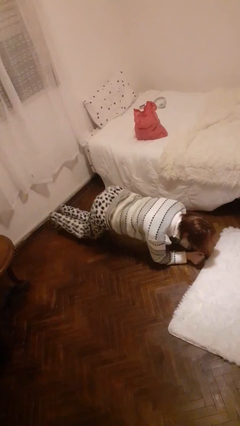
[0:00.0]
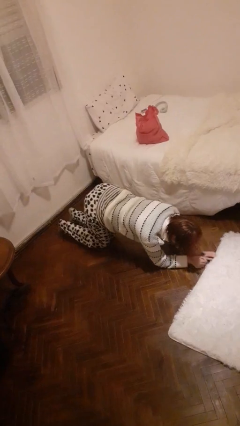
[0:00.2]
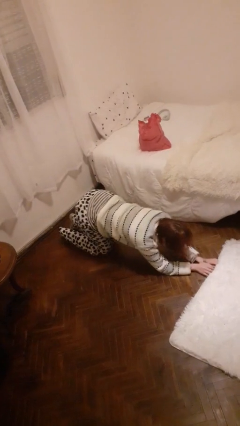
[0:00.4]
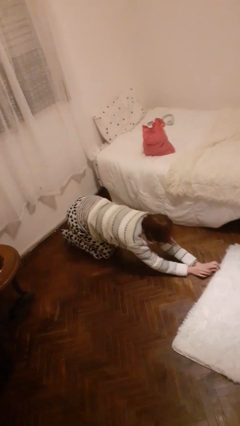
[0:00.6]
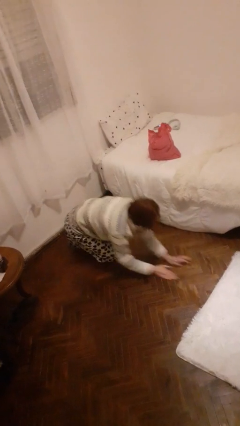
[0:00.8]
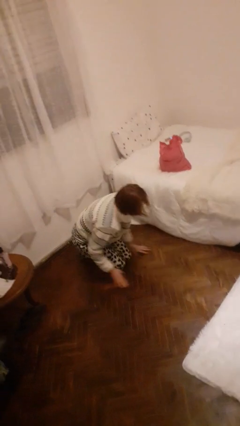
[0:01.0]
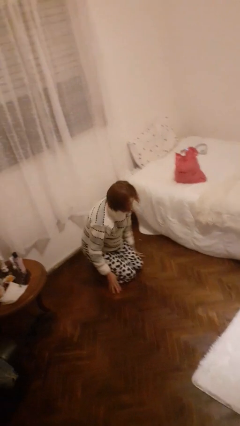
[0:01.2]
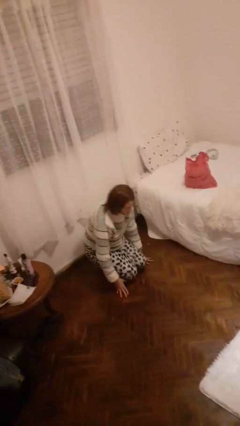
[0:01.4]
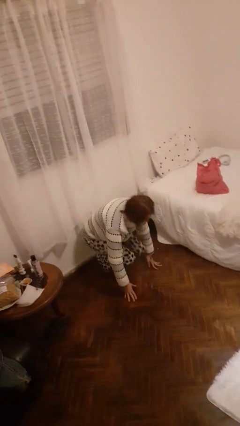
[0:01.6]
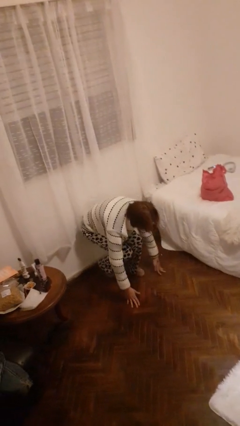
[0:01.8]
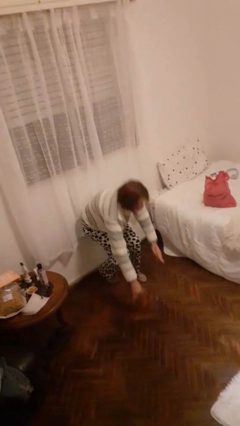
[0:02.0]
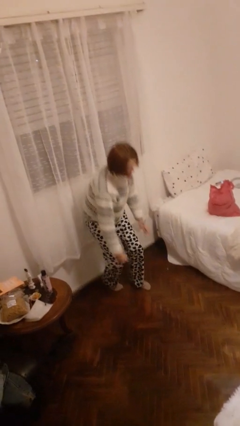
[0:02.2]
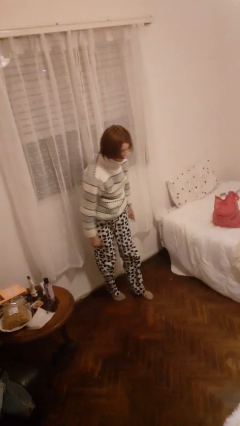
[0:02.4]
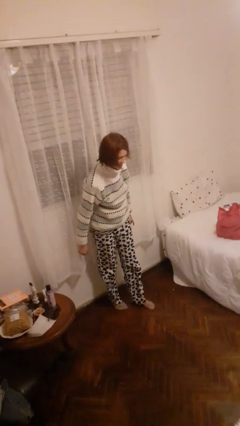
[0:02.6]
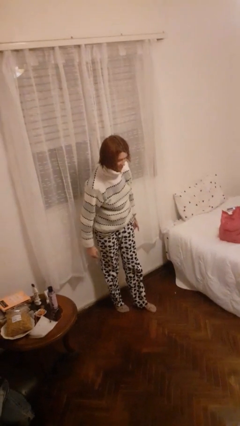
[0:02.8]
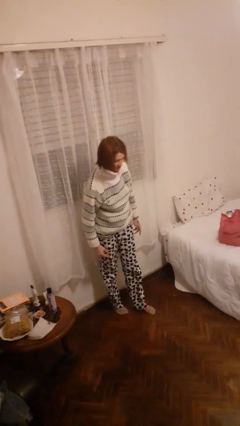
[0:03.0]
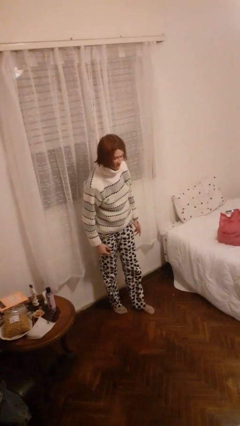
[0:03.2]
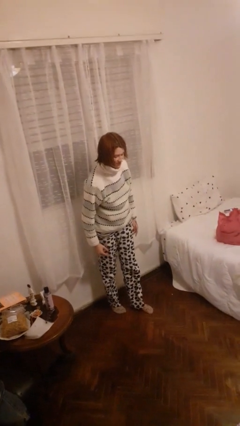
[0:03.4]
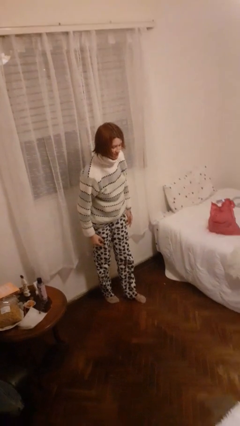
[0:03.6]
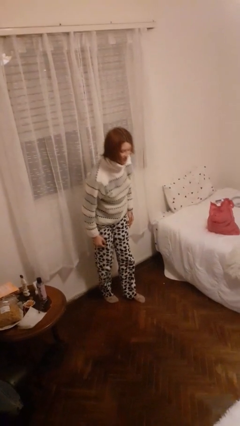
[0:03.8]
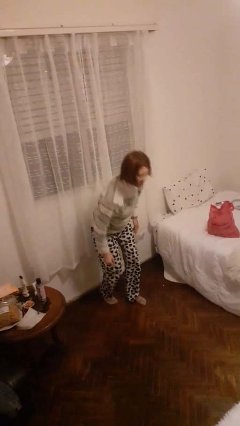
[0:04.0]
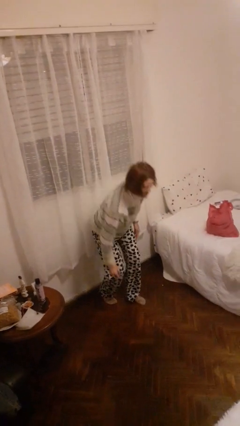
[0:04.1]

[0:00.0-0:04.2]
person stands up from floor

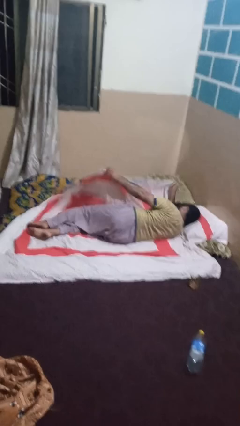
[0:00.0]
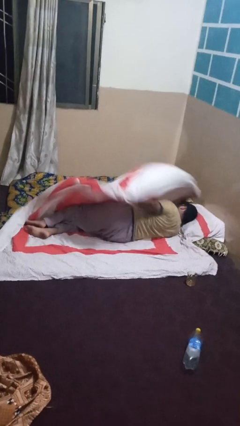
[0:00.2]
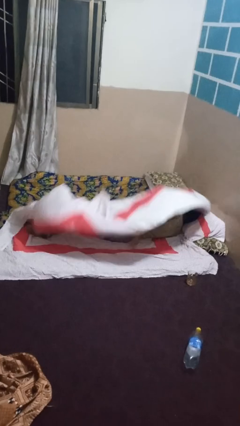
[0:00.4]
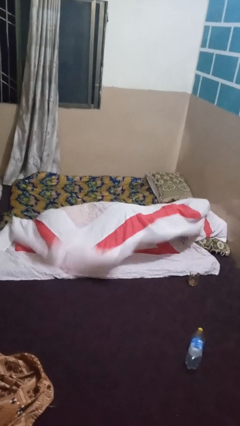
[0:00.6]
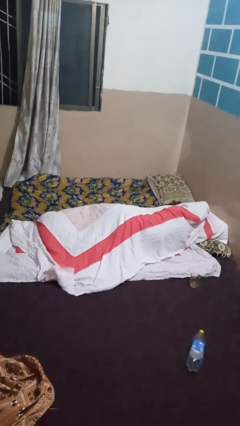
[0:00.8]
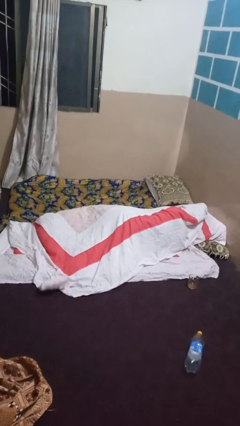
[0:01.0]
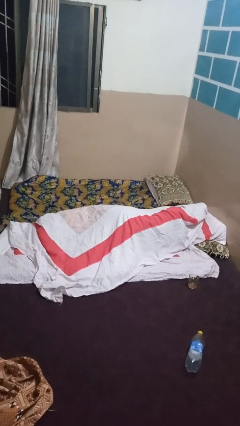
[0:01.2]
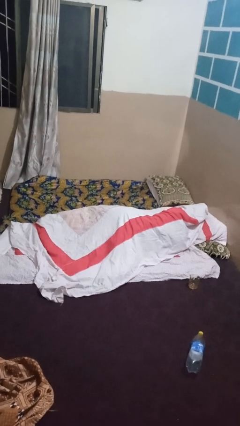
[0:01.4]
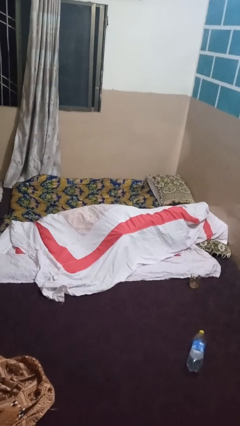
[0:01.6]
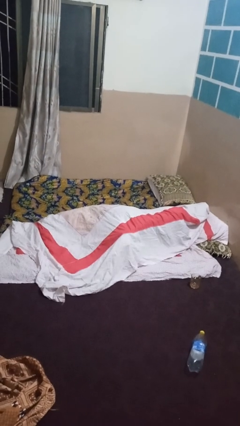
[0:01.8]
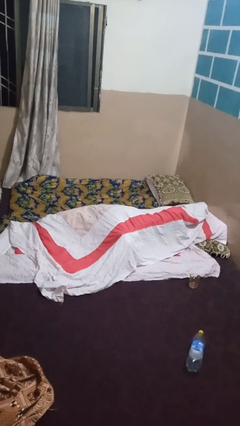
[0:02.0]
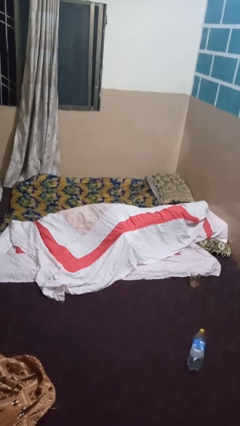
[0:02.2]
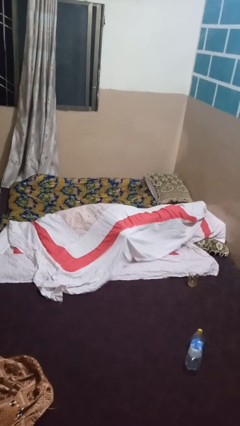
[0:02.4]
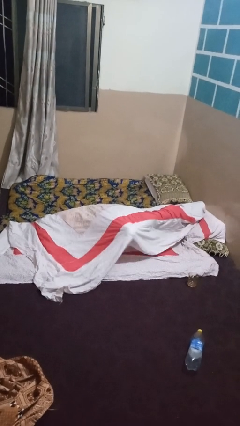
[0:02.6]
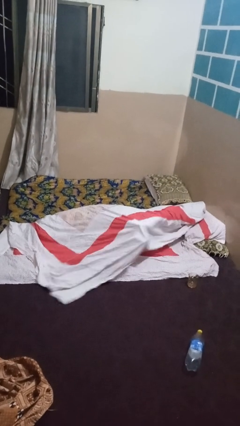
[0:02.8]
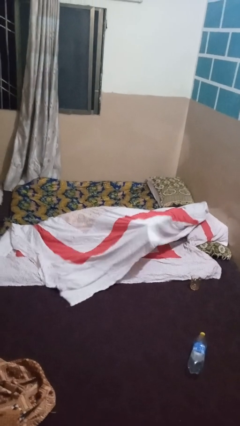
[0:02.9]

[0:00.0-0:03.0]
person covers with bedsheets

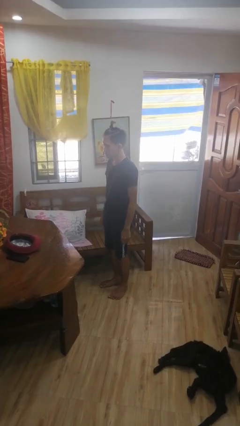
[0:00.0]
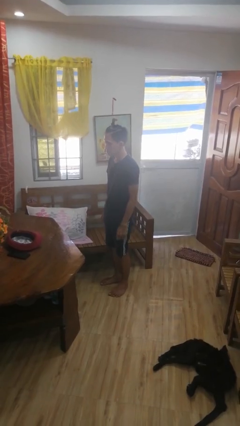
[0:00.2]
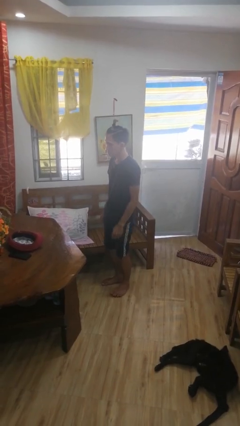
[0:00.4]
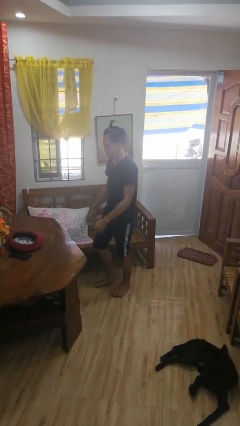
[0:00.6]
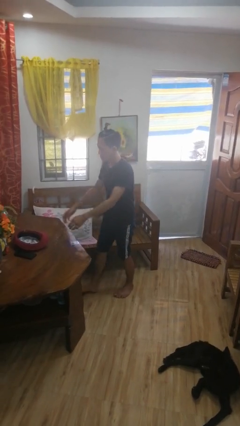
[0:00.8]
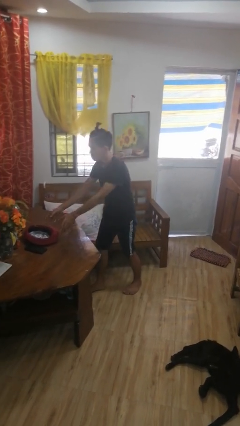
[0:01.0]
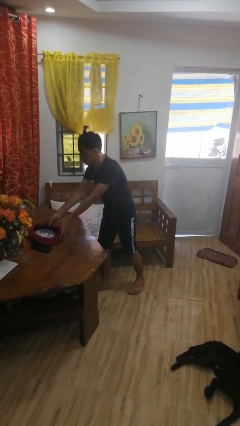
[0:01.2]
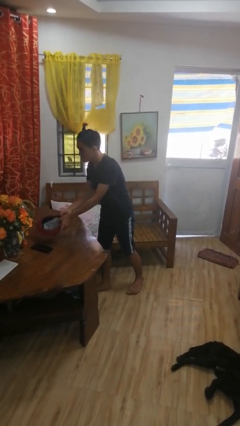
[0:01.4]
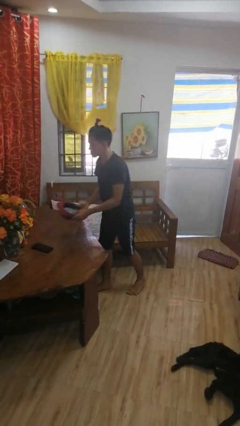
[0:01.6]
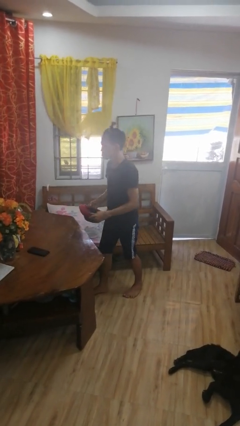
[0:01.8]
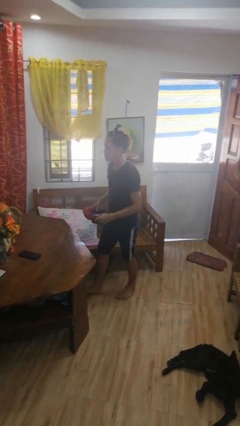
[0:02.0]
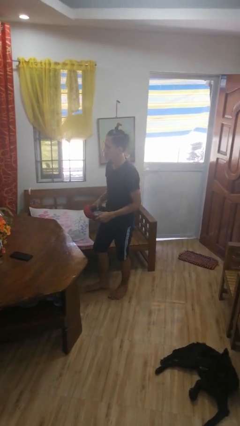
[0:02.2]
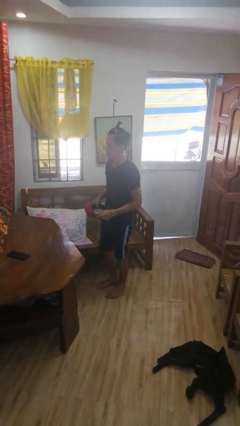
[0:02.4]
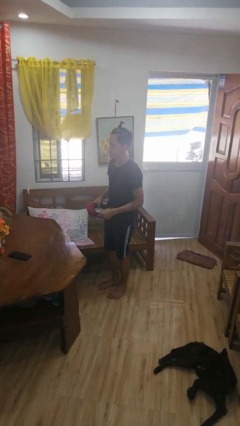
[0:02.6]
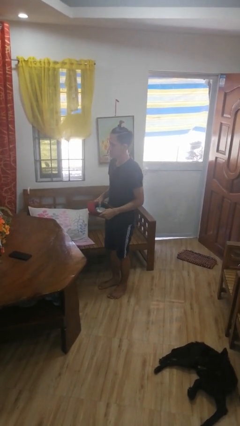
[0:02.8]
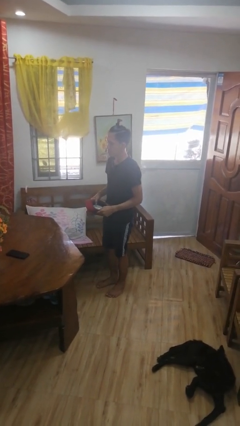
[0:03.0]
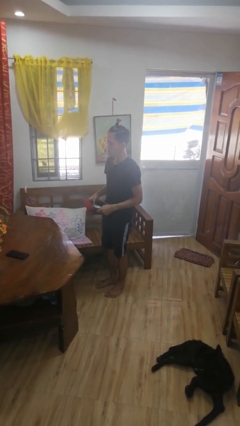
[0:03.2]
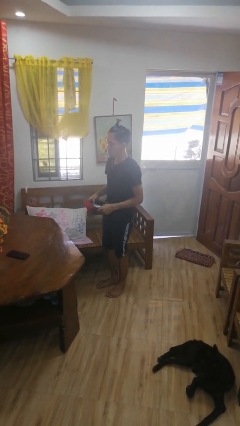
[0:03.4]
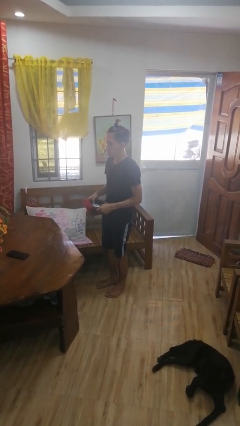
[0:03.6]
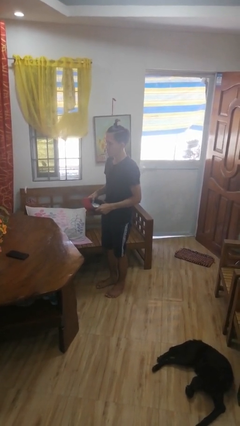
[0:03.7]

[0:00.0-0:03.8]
person picks up object from table

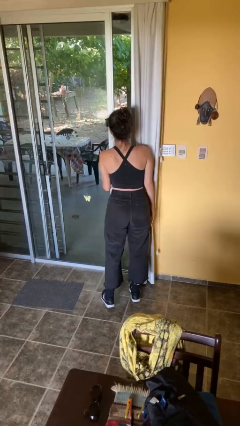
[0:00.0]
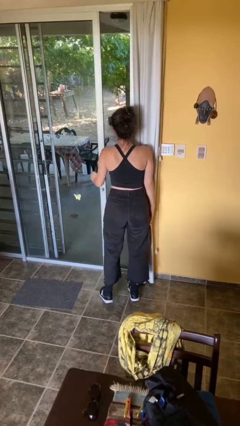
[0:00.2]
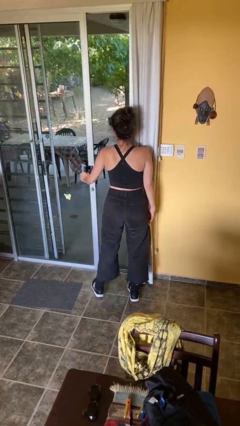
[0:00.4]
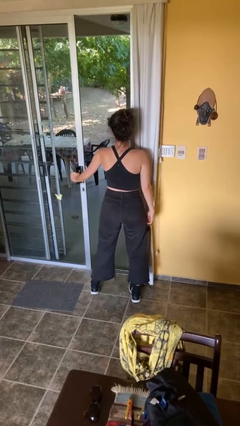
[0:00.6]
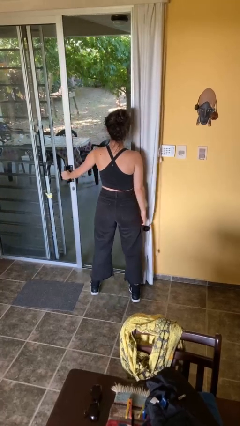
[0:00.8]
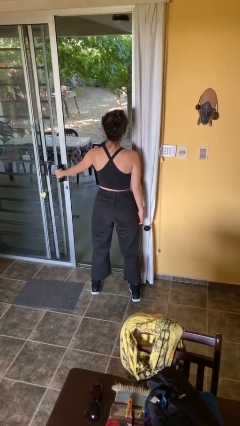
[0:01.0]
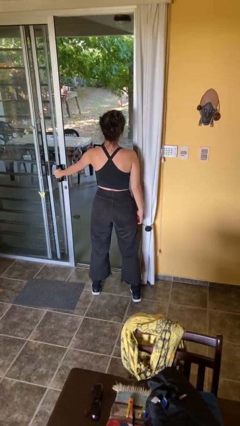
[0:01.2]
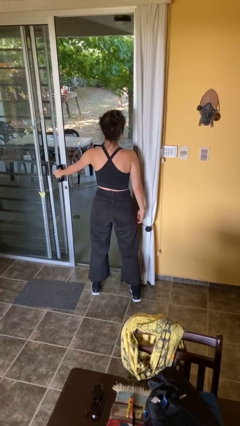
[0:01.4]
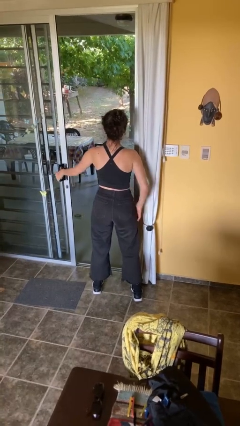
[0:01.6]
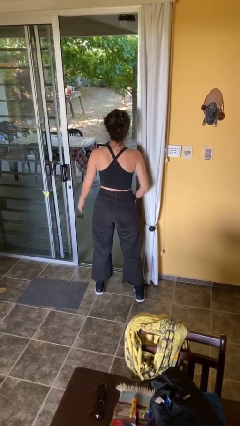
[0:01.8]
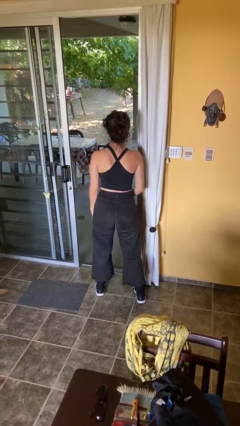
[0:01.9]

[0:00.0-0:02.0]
person opens facility door

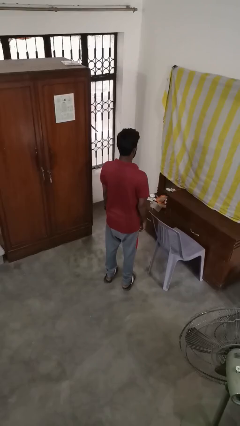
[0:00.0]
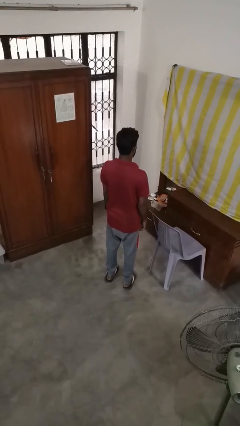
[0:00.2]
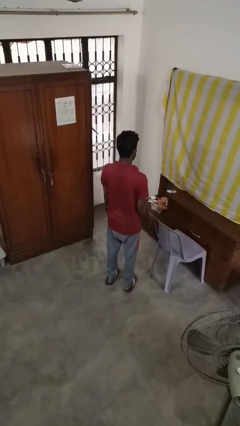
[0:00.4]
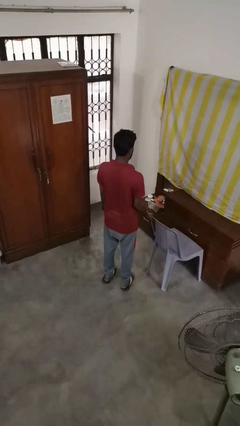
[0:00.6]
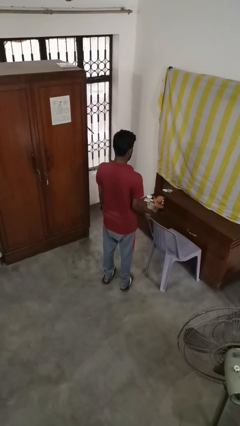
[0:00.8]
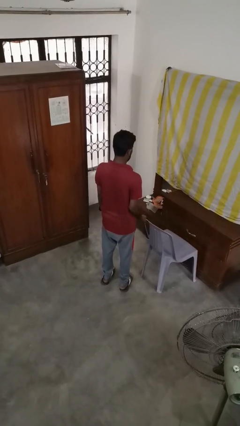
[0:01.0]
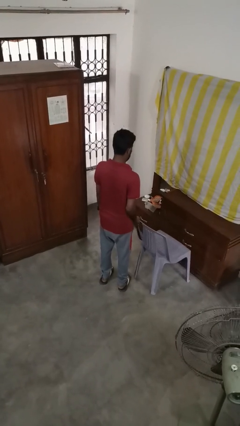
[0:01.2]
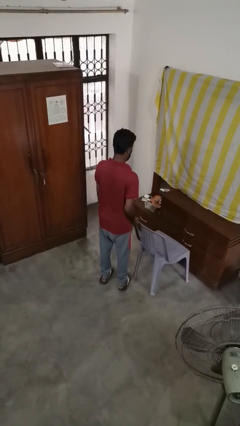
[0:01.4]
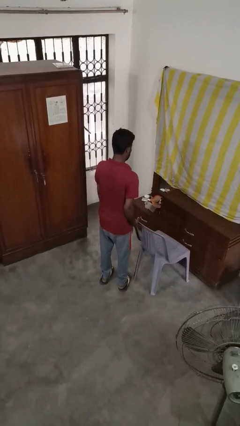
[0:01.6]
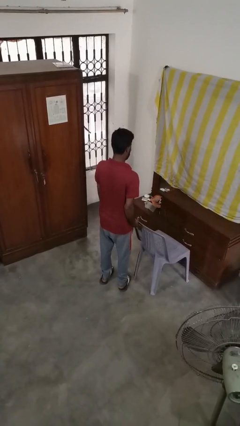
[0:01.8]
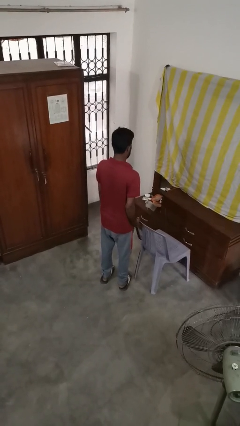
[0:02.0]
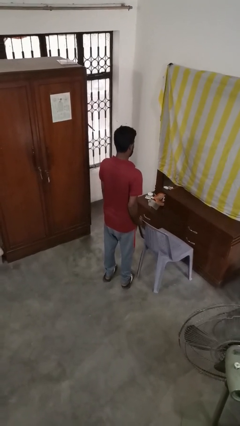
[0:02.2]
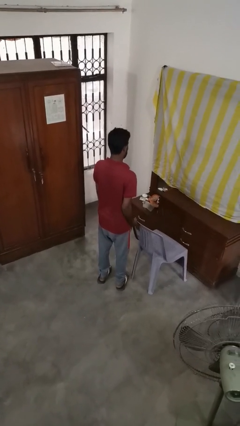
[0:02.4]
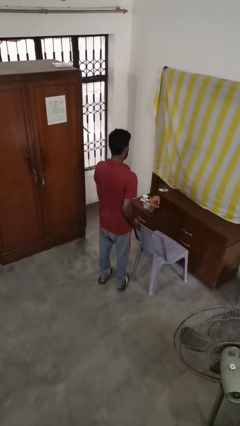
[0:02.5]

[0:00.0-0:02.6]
person pulls out chair

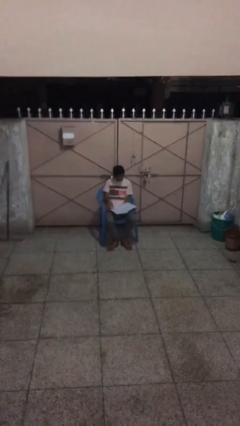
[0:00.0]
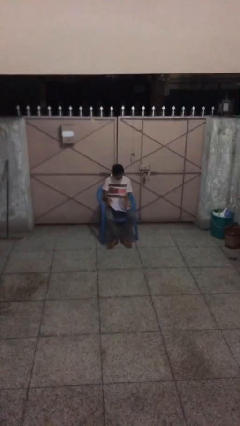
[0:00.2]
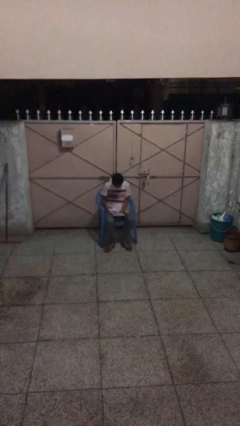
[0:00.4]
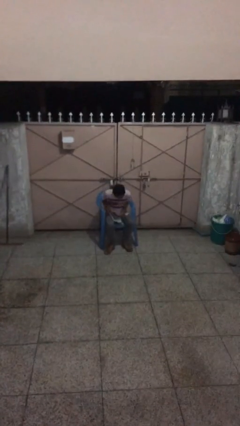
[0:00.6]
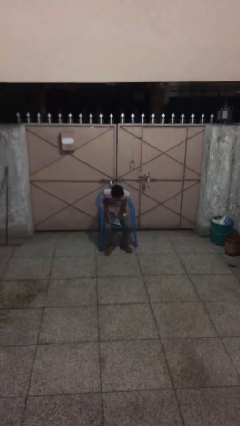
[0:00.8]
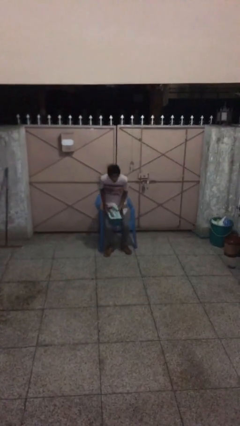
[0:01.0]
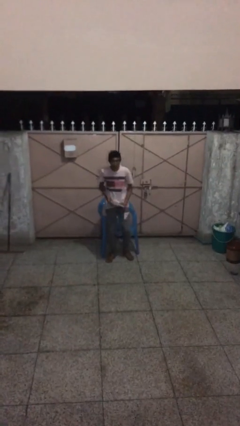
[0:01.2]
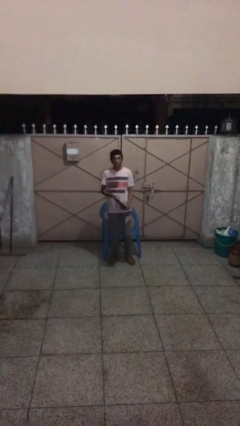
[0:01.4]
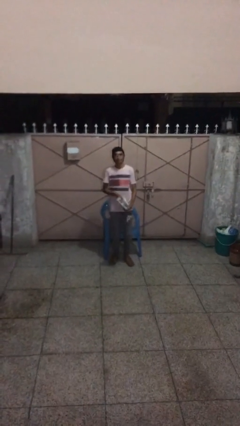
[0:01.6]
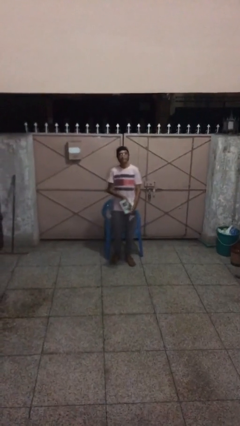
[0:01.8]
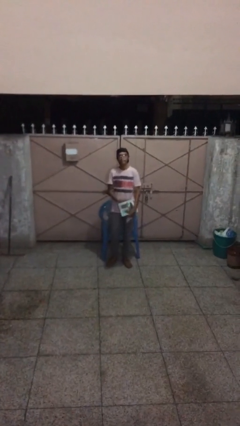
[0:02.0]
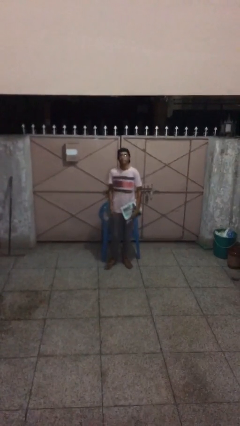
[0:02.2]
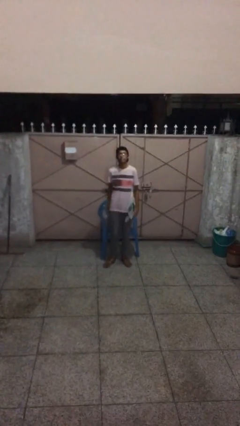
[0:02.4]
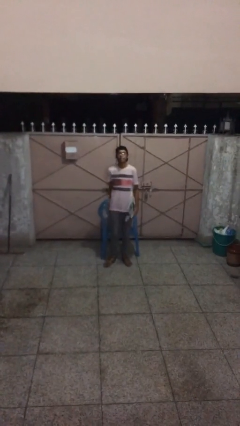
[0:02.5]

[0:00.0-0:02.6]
person stands up
